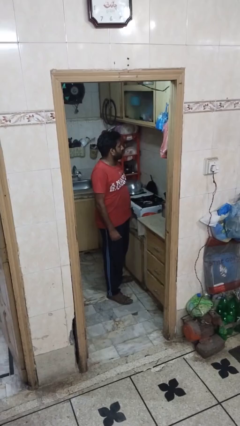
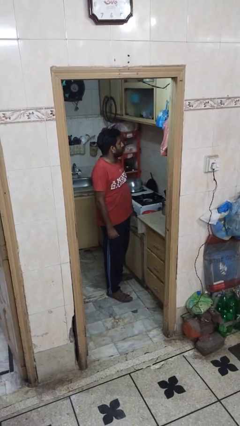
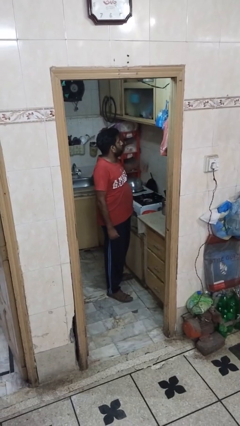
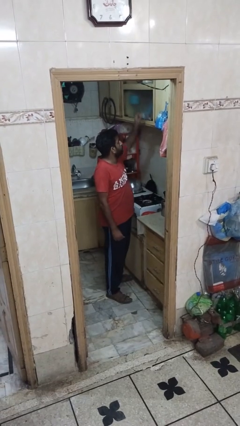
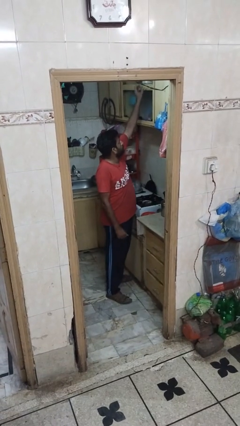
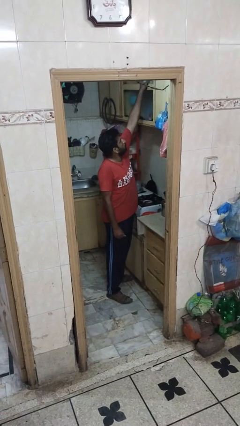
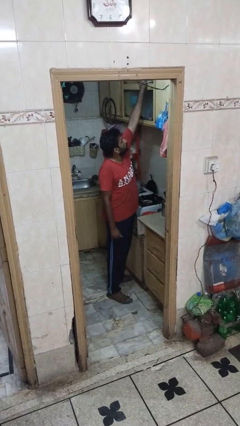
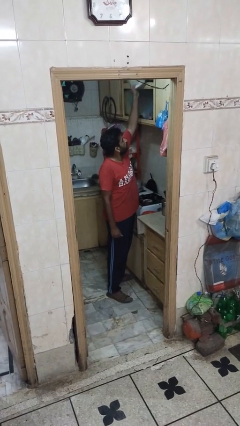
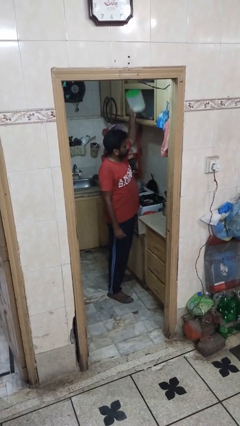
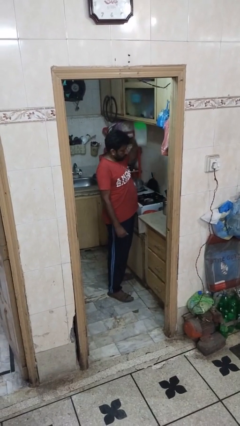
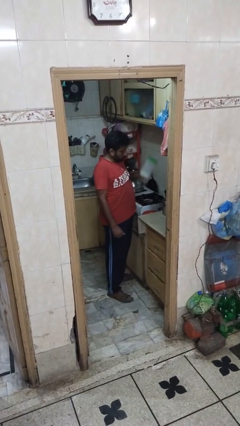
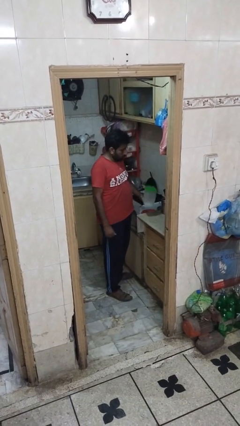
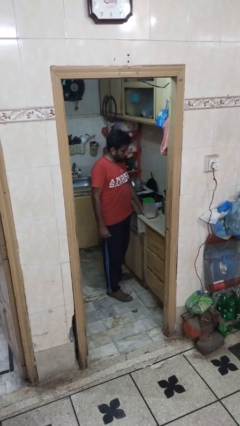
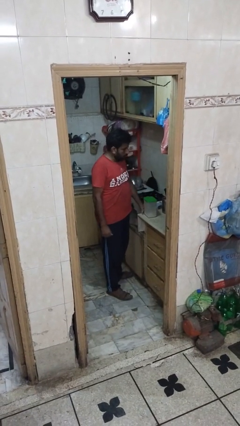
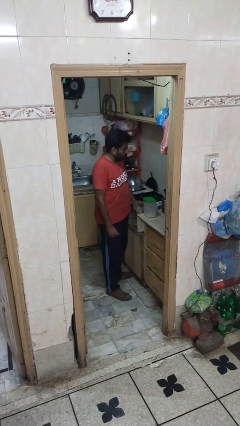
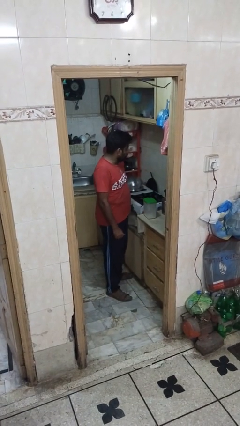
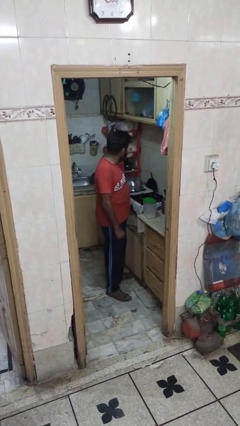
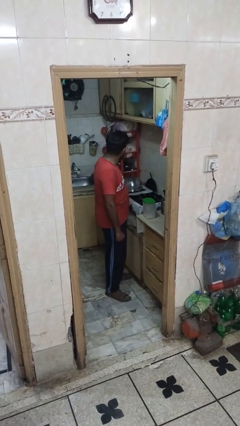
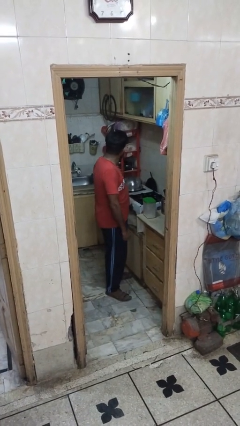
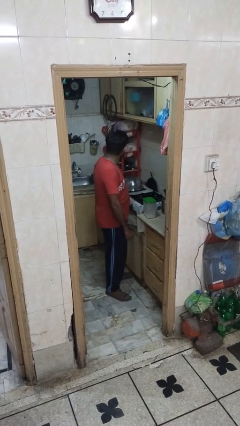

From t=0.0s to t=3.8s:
person puts down object on shelf

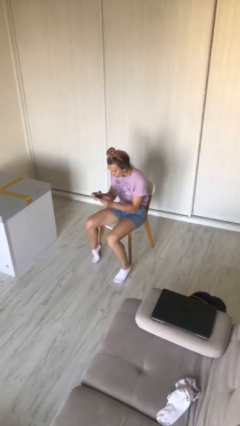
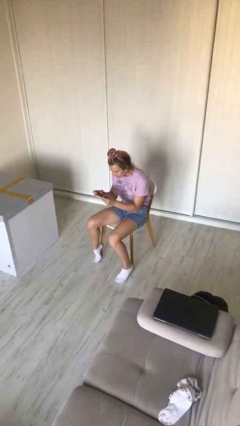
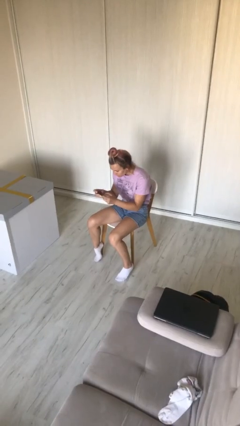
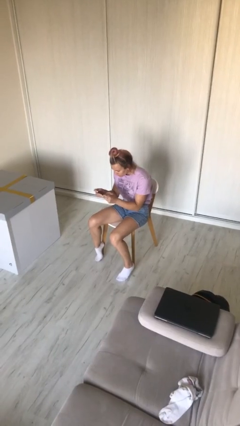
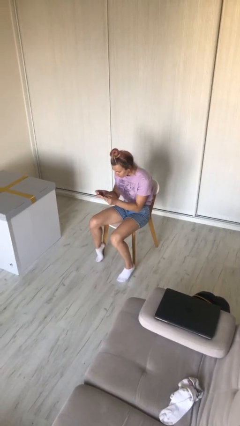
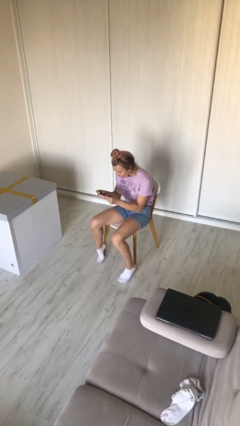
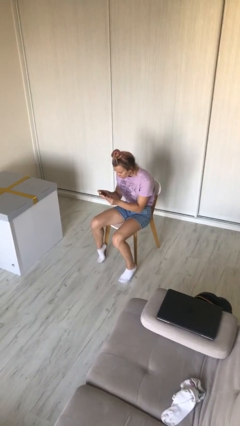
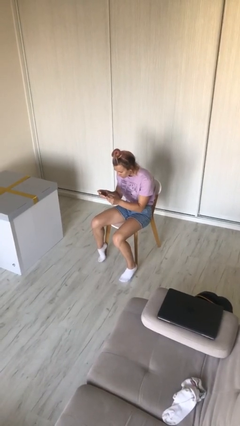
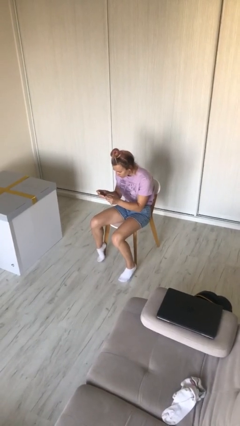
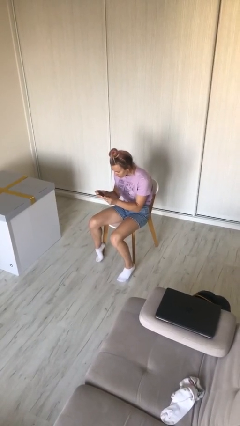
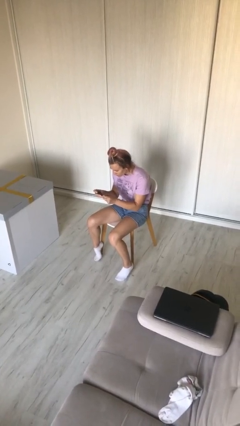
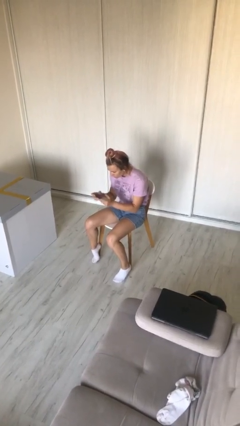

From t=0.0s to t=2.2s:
person interacts with handheld game

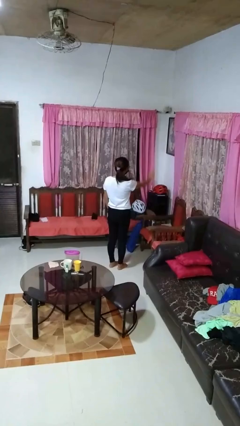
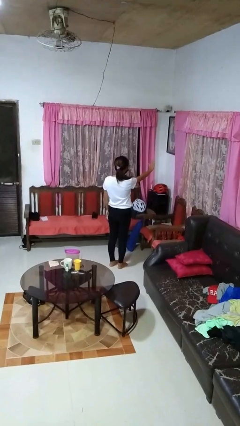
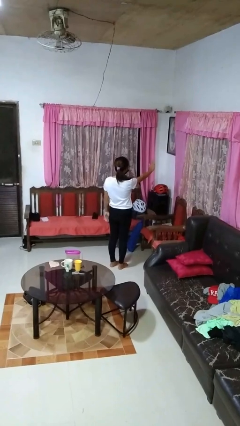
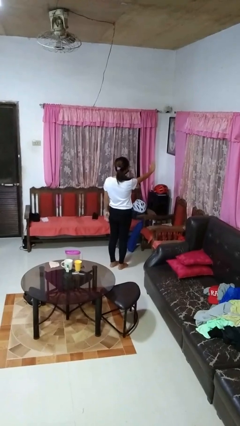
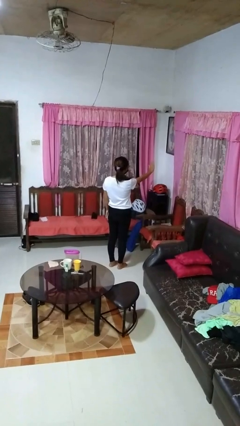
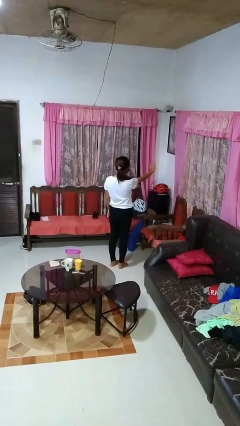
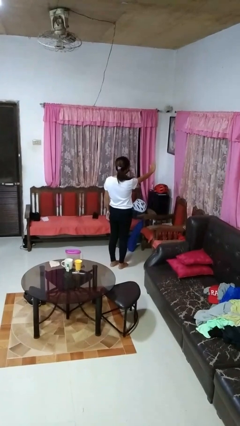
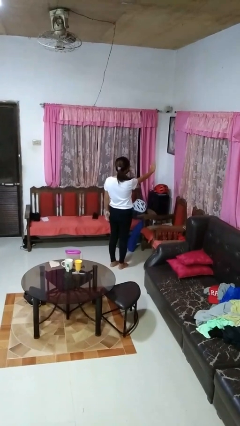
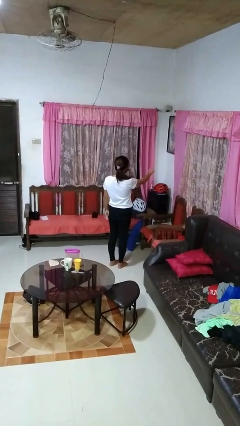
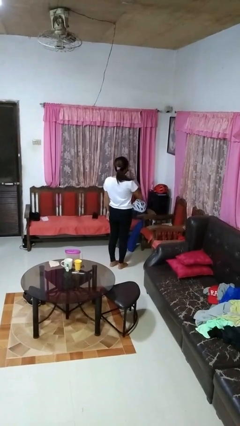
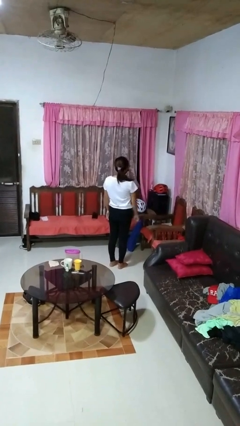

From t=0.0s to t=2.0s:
person gestures stop

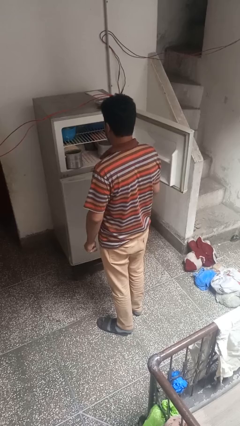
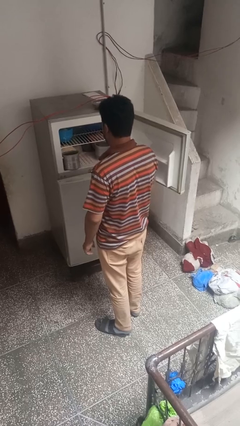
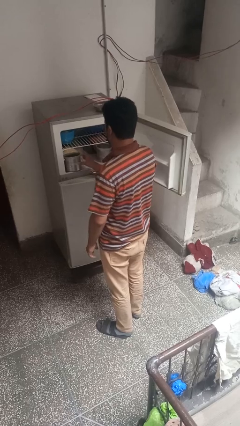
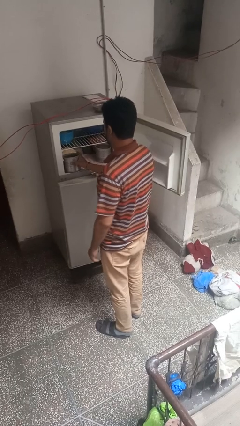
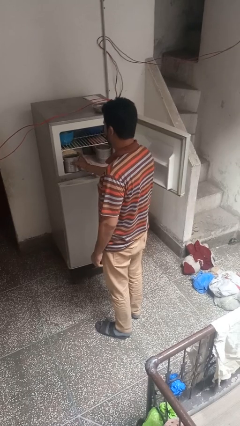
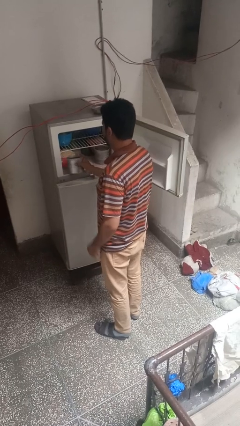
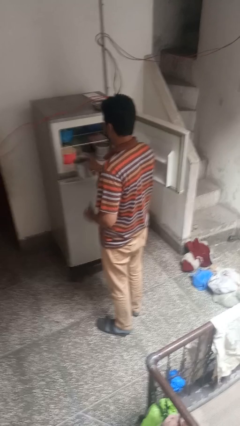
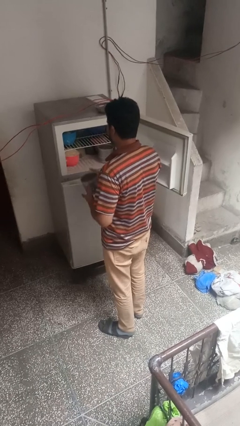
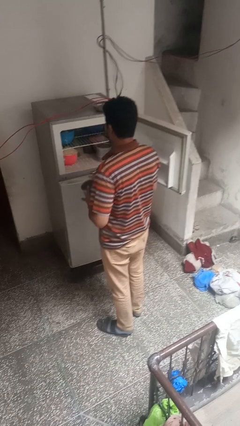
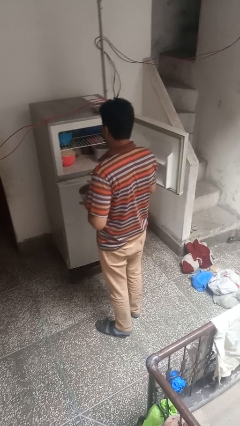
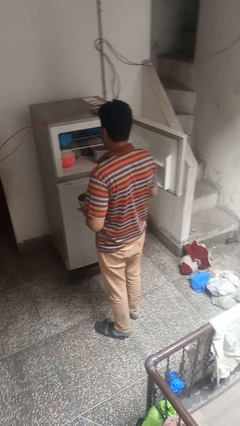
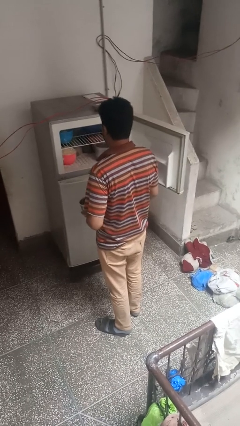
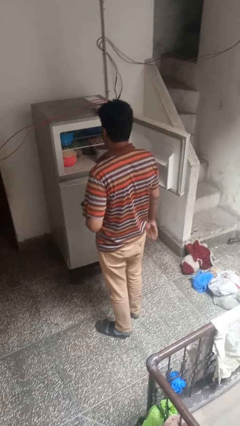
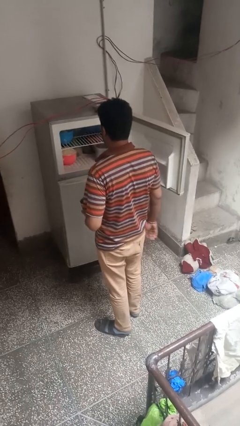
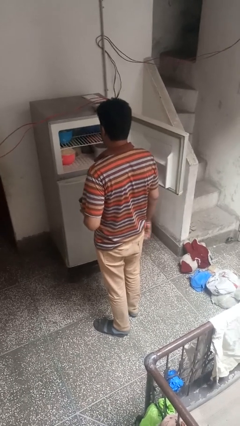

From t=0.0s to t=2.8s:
person takes object from refrigerator

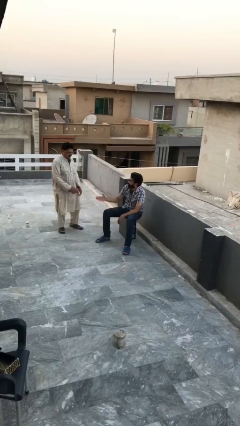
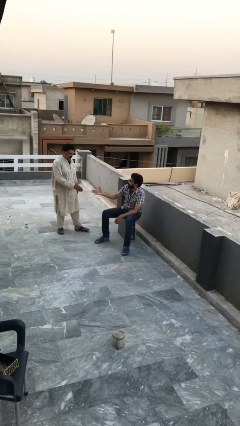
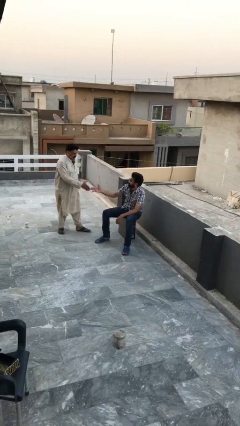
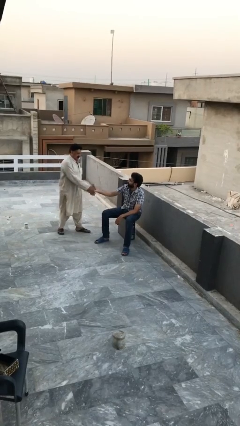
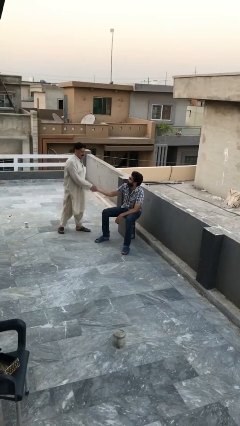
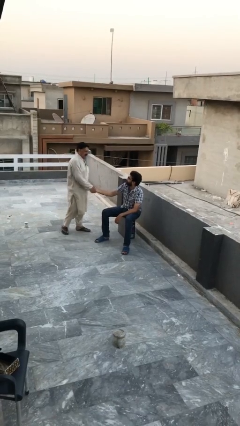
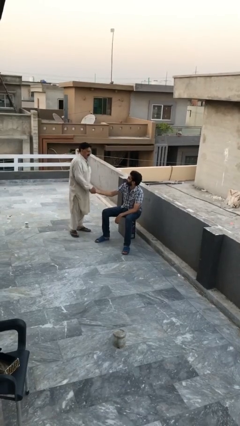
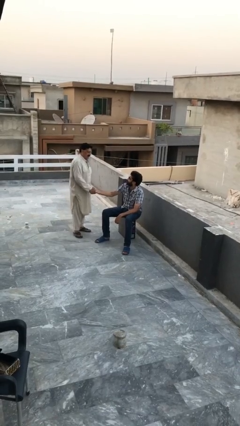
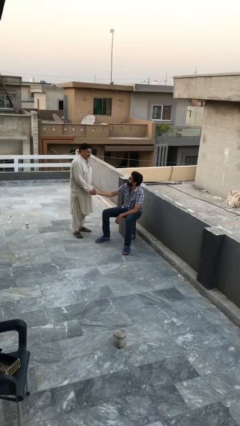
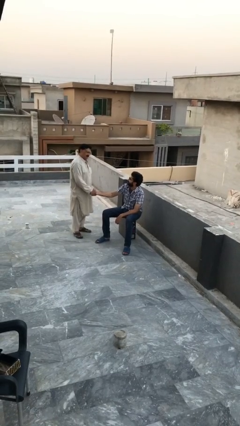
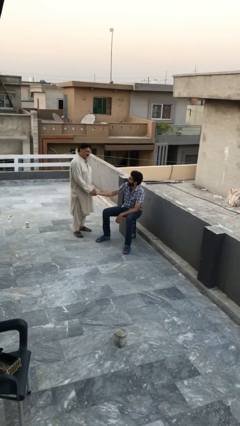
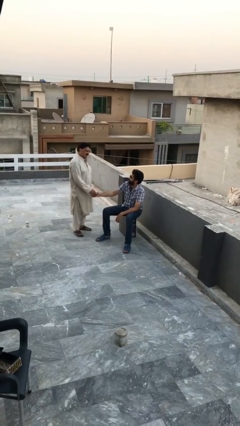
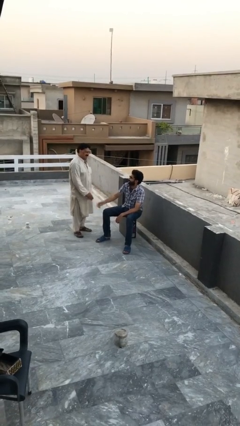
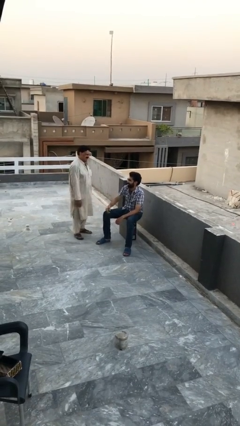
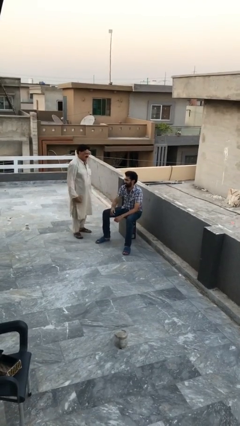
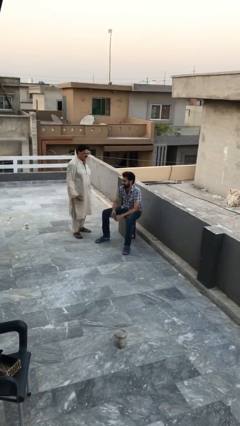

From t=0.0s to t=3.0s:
person shakes hand

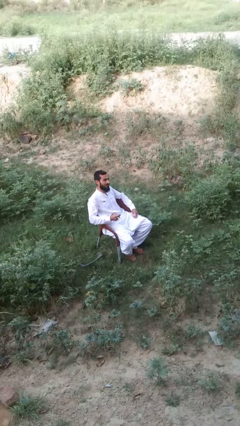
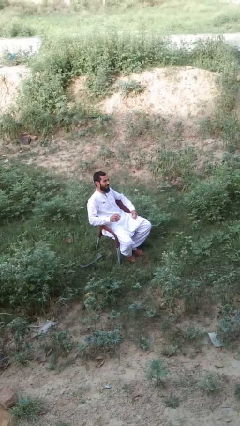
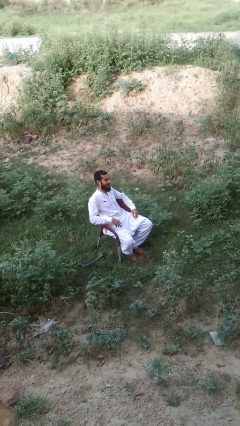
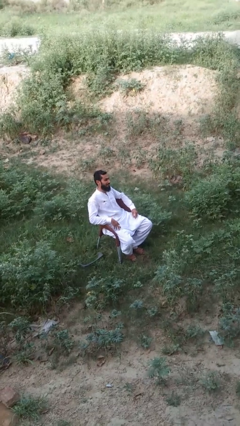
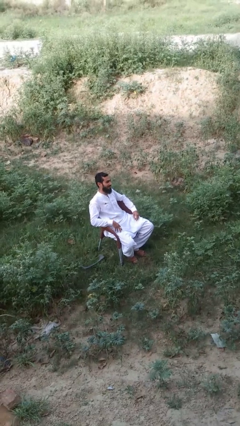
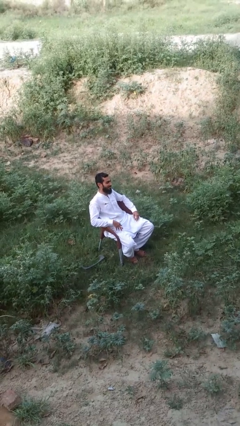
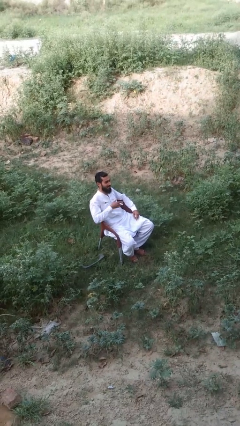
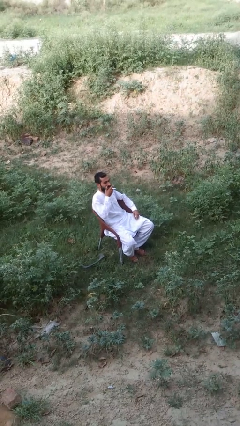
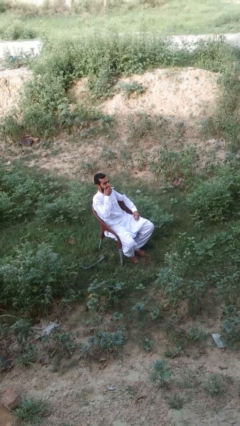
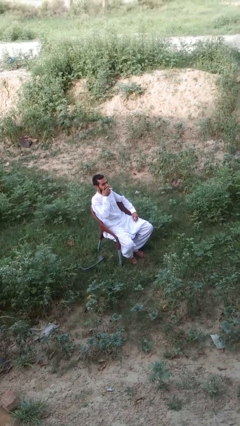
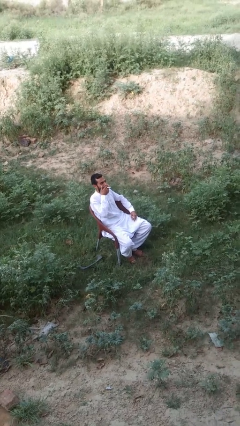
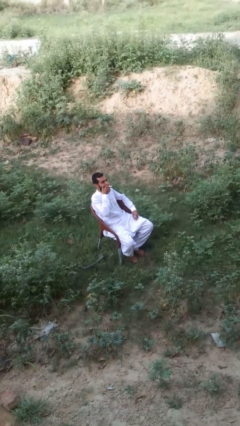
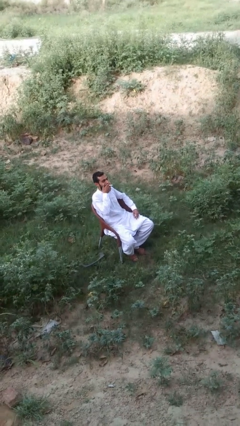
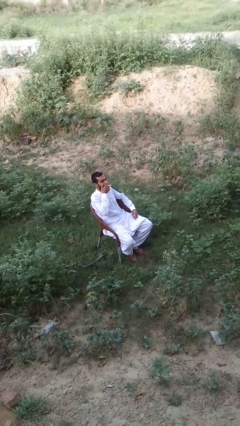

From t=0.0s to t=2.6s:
person vapes

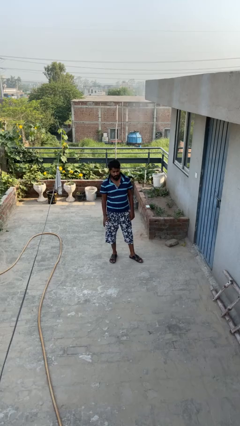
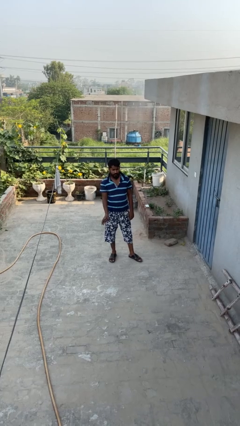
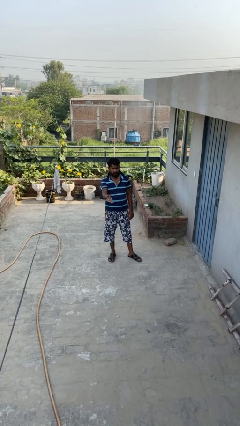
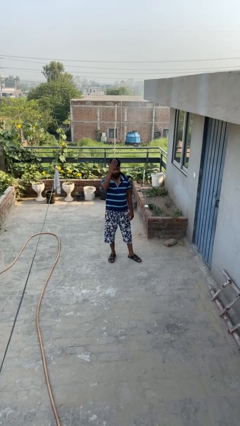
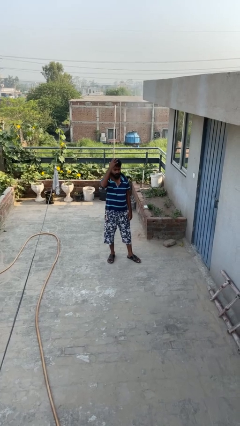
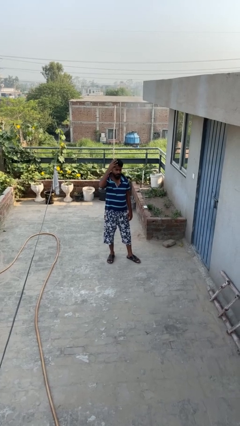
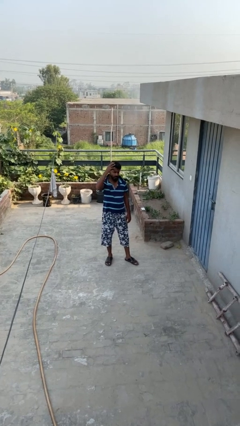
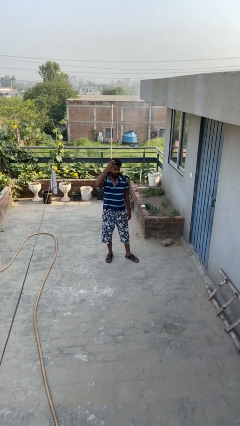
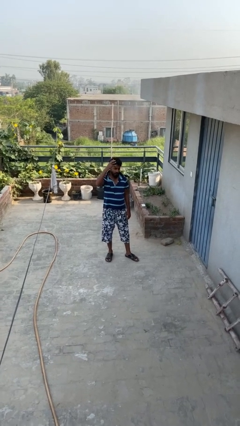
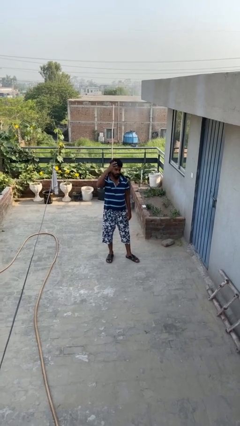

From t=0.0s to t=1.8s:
person gestures swipe up
